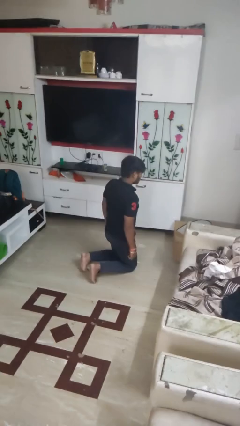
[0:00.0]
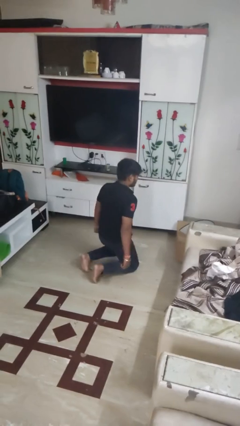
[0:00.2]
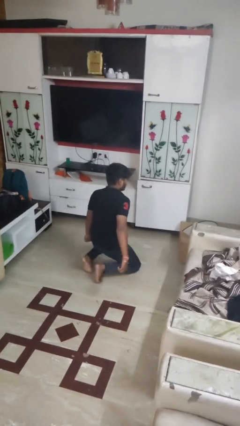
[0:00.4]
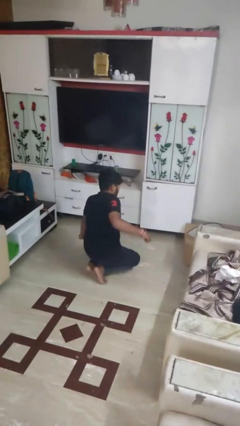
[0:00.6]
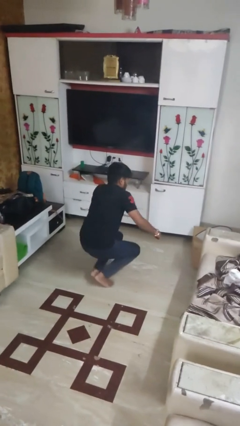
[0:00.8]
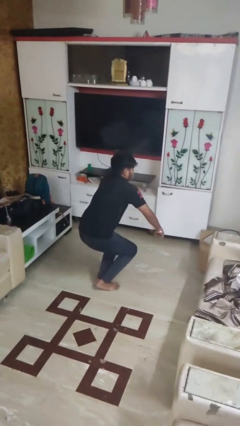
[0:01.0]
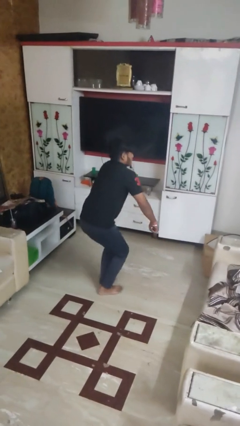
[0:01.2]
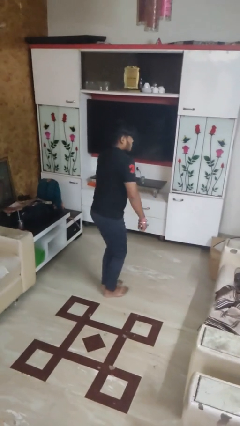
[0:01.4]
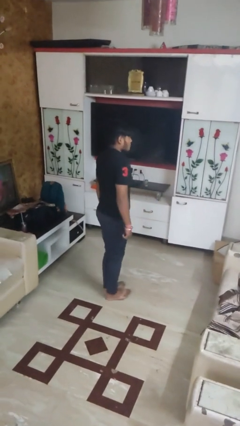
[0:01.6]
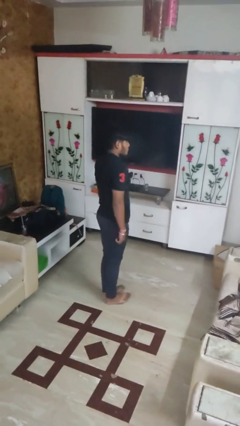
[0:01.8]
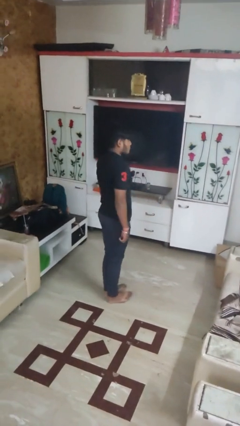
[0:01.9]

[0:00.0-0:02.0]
person stands up from floor

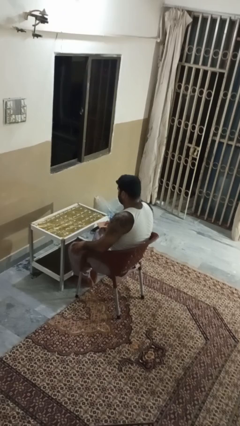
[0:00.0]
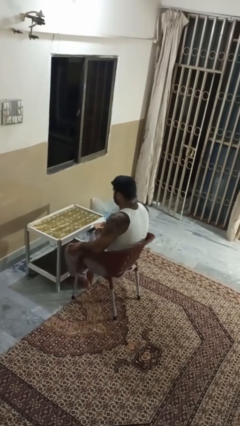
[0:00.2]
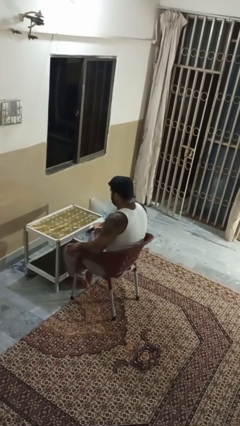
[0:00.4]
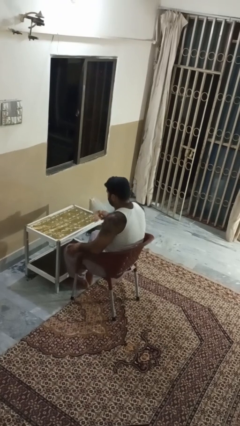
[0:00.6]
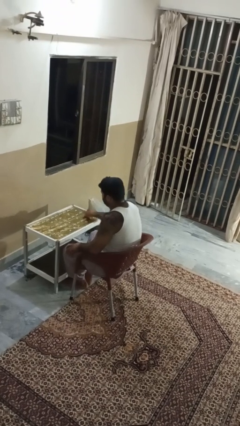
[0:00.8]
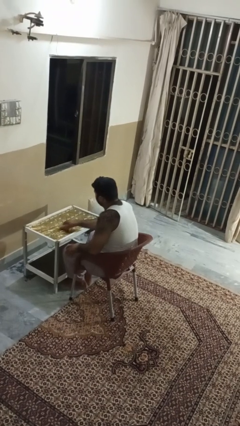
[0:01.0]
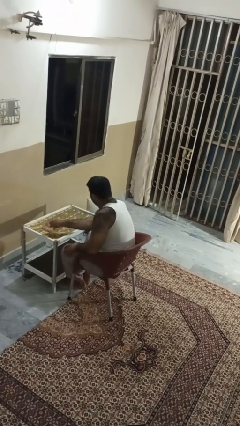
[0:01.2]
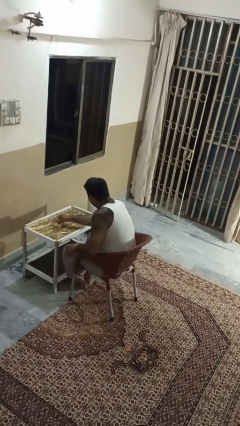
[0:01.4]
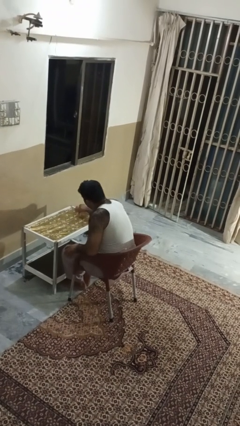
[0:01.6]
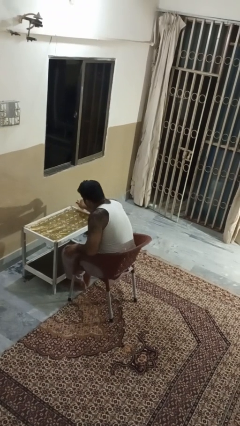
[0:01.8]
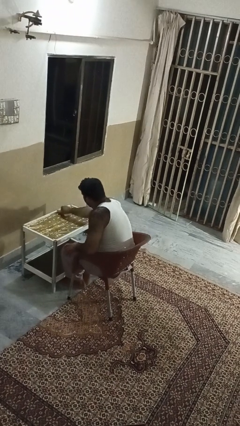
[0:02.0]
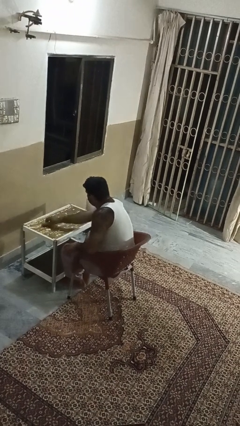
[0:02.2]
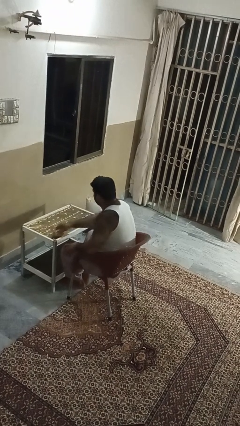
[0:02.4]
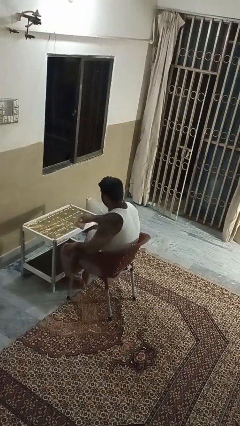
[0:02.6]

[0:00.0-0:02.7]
person cleans table with rag

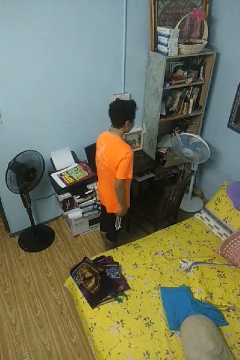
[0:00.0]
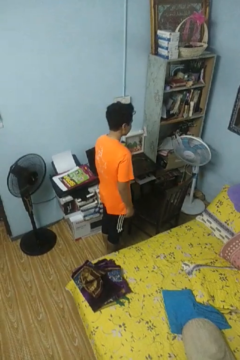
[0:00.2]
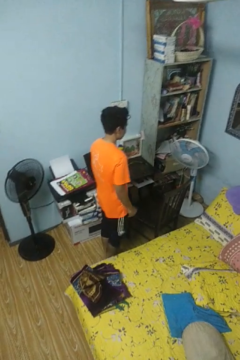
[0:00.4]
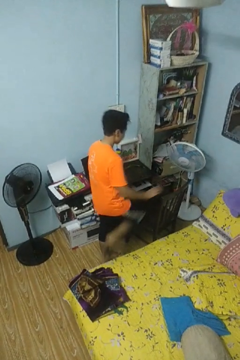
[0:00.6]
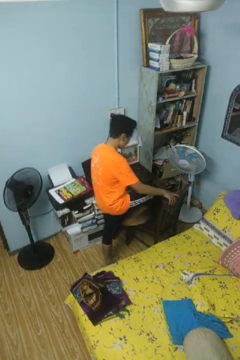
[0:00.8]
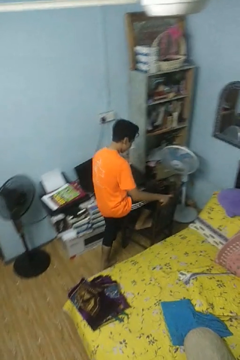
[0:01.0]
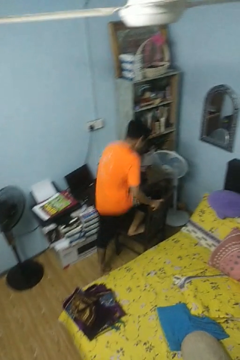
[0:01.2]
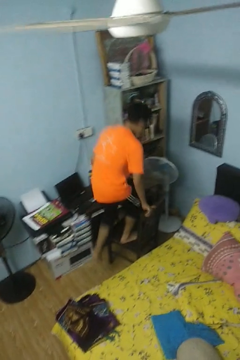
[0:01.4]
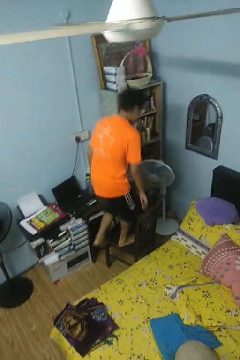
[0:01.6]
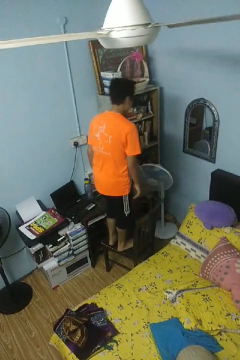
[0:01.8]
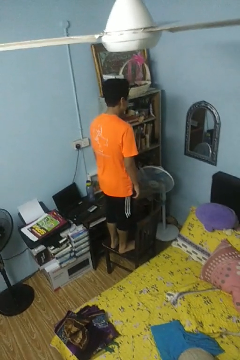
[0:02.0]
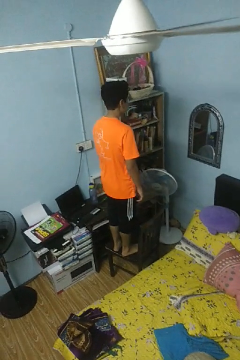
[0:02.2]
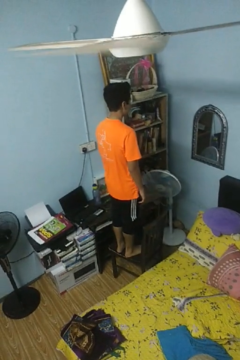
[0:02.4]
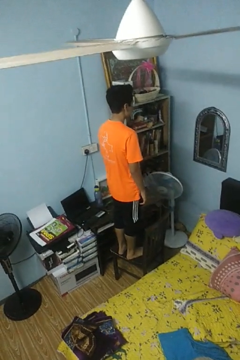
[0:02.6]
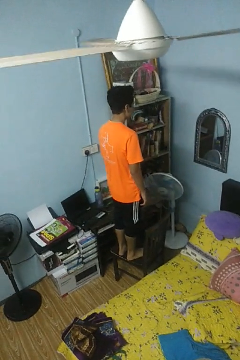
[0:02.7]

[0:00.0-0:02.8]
person climbs on chair

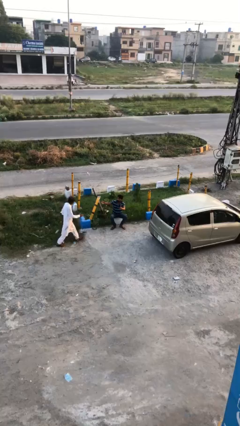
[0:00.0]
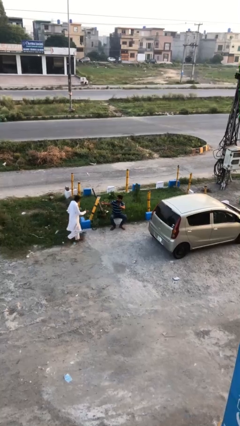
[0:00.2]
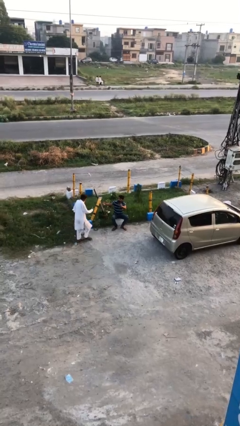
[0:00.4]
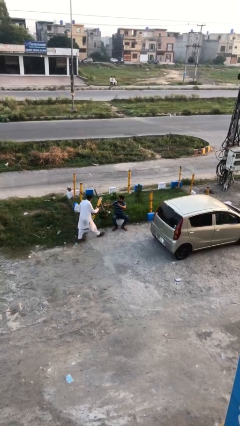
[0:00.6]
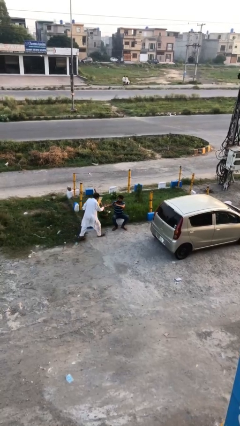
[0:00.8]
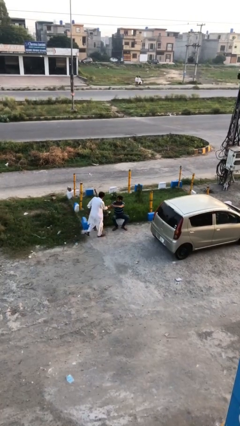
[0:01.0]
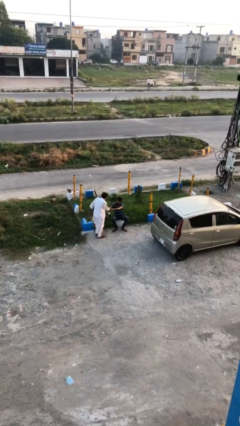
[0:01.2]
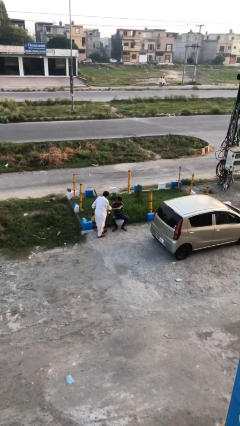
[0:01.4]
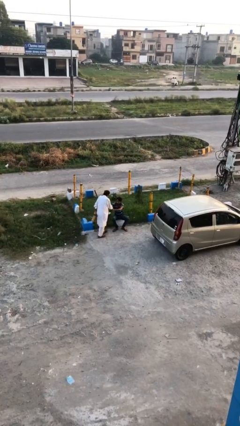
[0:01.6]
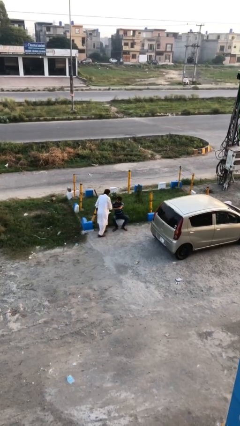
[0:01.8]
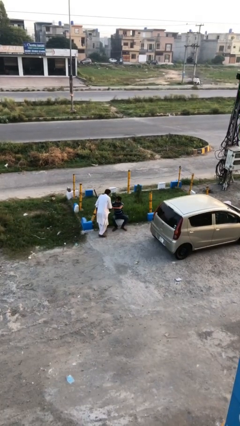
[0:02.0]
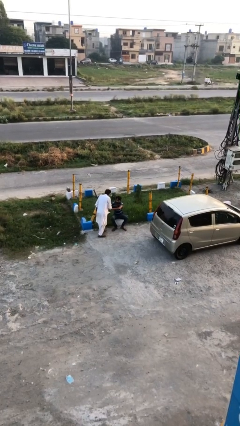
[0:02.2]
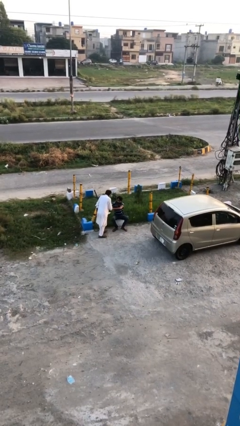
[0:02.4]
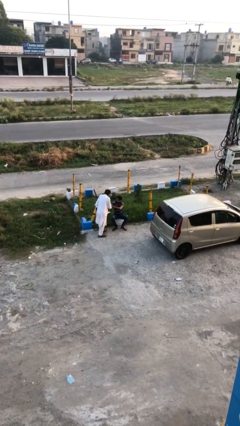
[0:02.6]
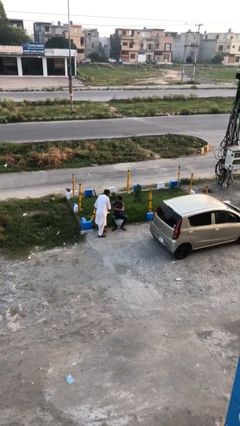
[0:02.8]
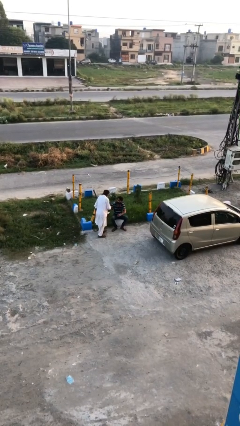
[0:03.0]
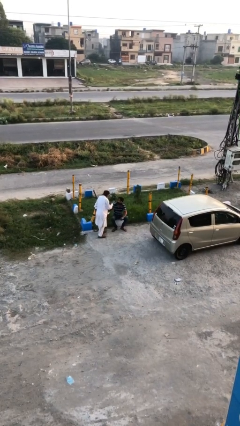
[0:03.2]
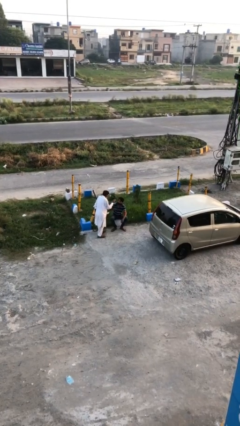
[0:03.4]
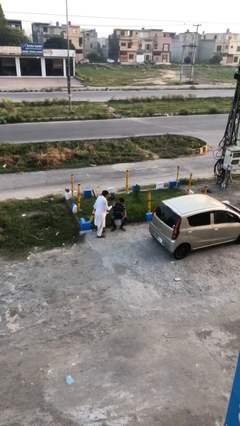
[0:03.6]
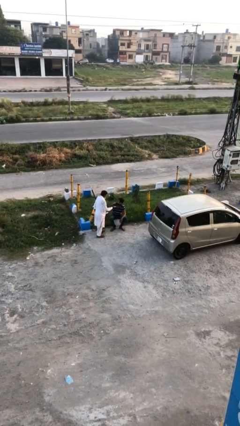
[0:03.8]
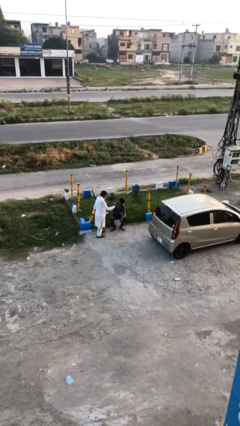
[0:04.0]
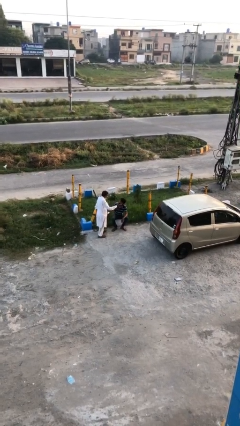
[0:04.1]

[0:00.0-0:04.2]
person shakes hand

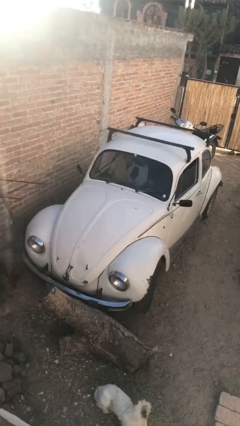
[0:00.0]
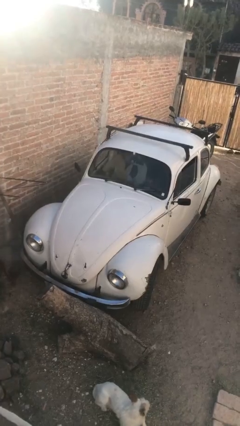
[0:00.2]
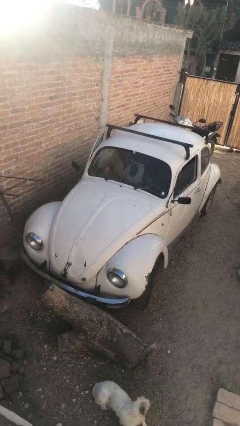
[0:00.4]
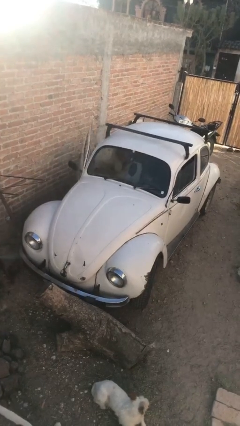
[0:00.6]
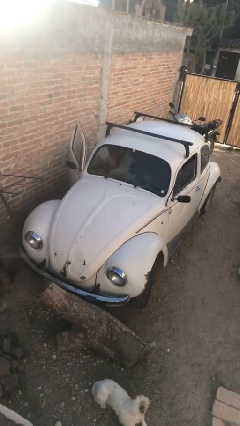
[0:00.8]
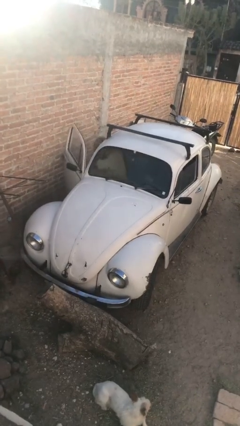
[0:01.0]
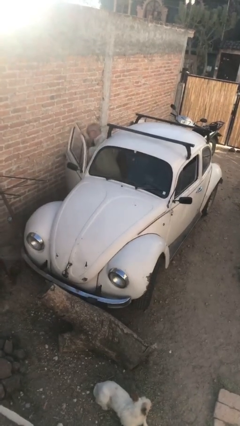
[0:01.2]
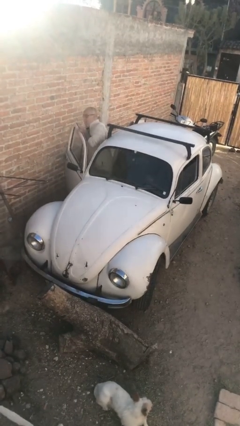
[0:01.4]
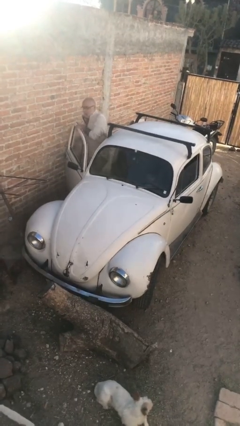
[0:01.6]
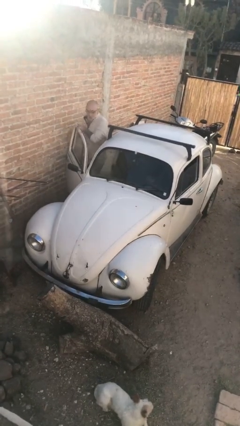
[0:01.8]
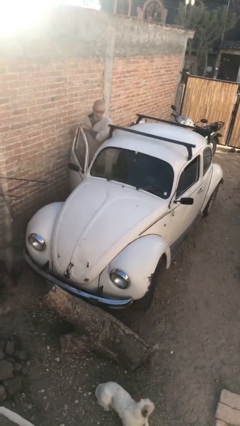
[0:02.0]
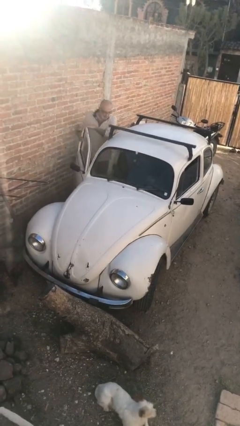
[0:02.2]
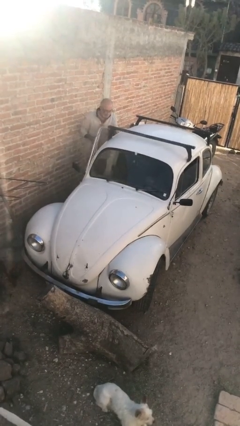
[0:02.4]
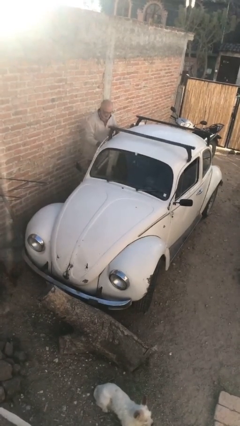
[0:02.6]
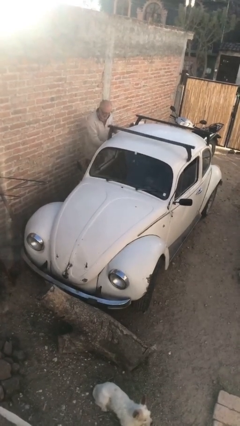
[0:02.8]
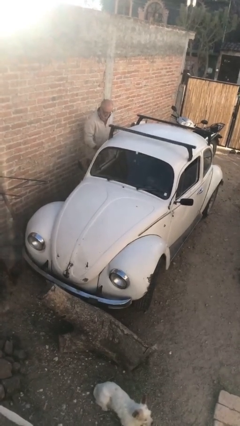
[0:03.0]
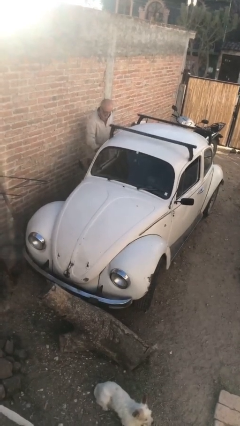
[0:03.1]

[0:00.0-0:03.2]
car drops off person

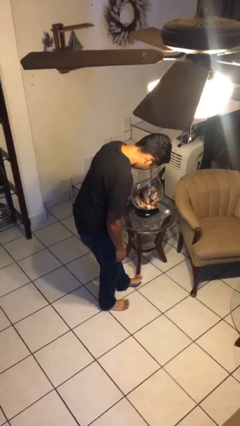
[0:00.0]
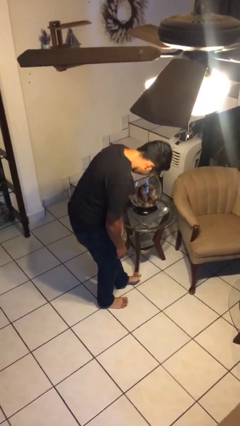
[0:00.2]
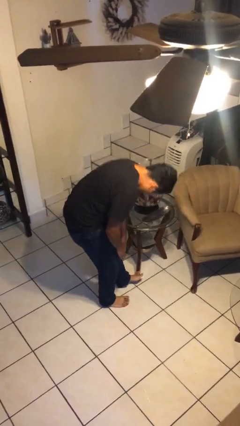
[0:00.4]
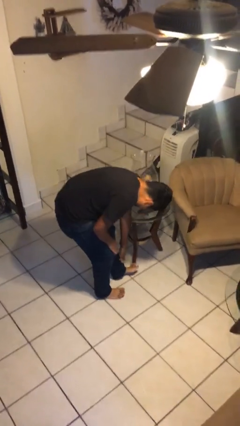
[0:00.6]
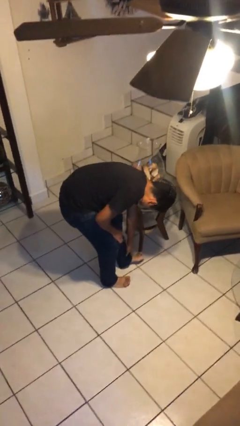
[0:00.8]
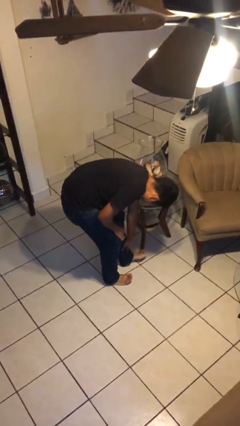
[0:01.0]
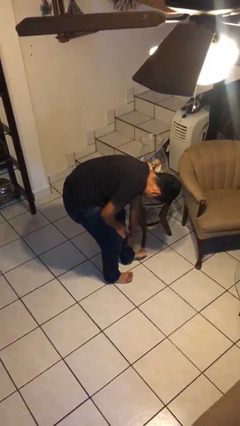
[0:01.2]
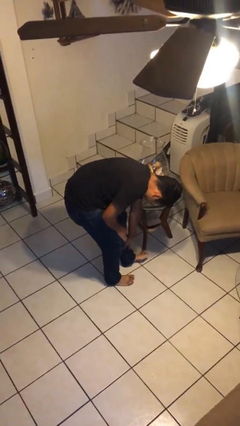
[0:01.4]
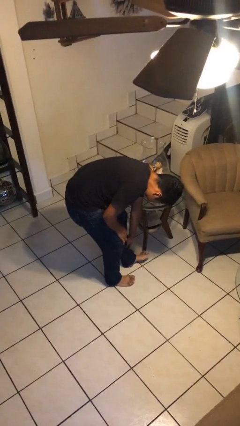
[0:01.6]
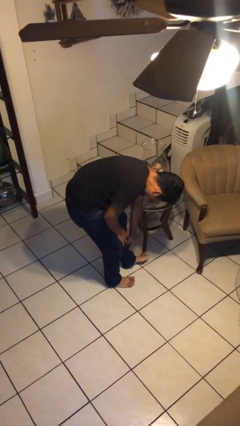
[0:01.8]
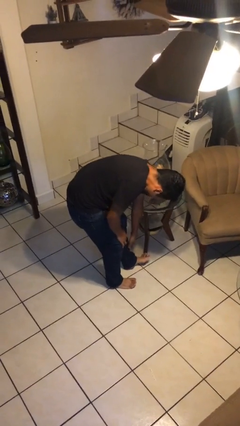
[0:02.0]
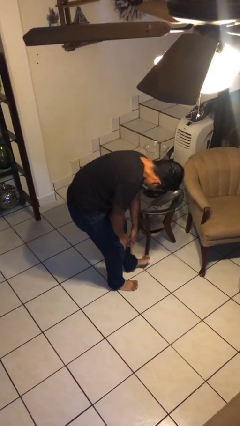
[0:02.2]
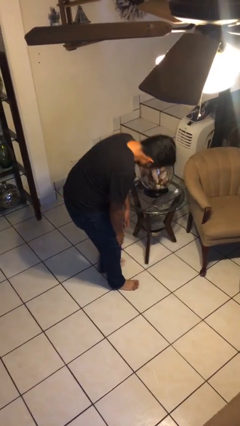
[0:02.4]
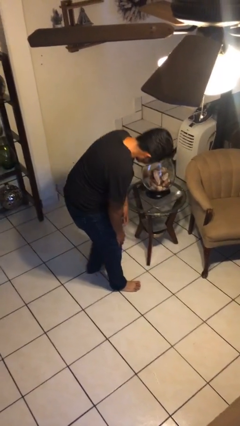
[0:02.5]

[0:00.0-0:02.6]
person stubs toe

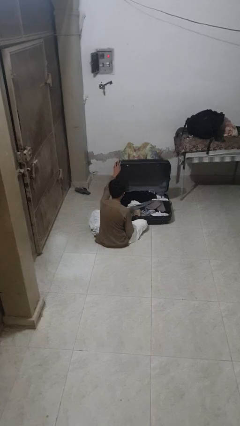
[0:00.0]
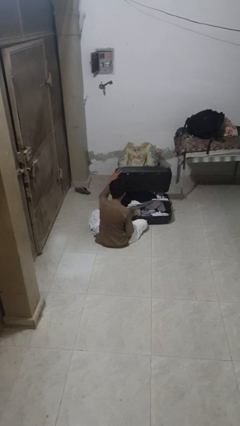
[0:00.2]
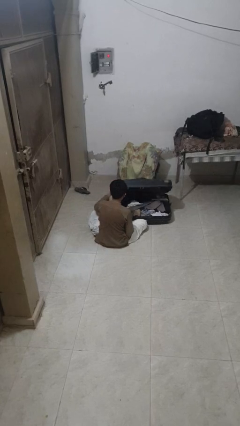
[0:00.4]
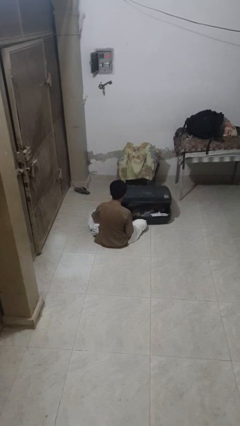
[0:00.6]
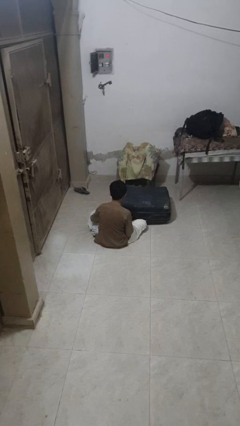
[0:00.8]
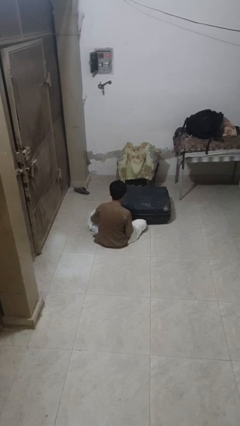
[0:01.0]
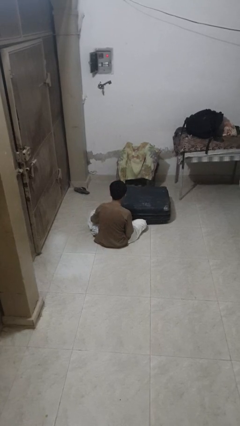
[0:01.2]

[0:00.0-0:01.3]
person closes suitcase
